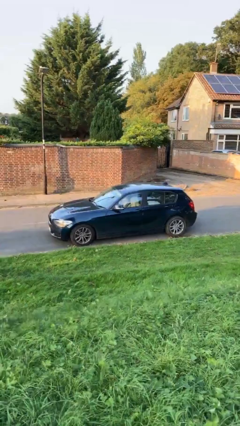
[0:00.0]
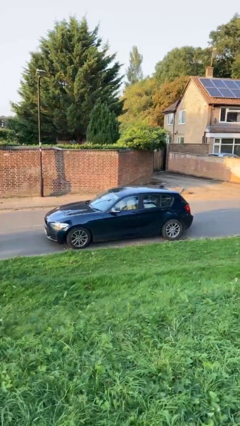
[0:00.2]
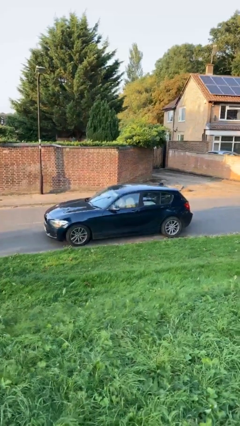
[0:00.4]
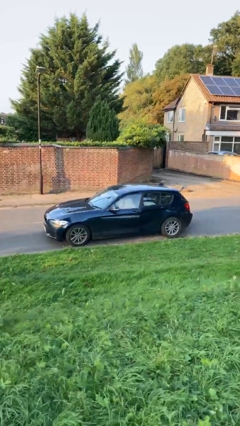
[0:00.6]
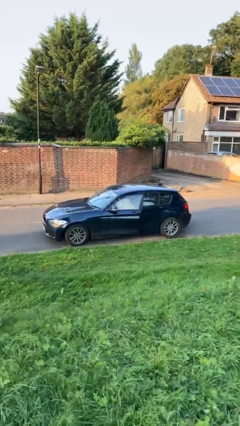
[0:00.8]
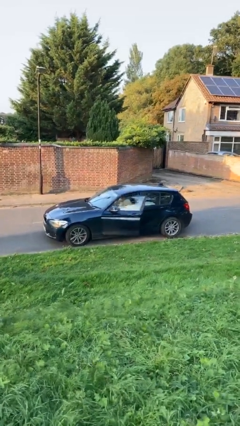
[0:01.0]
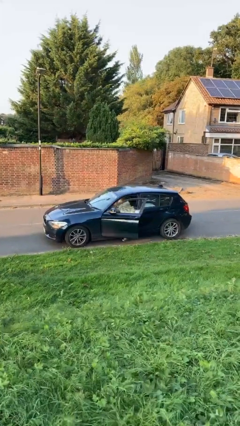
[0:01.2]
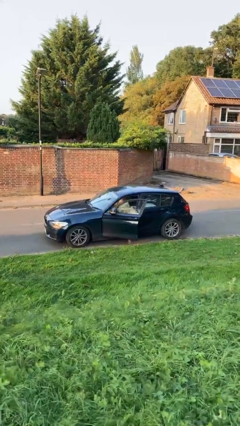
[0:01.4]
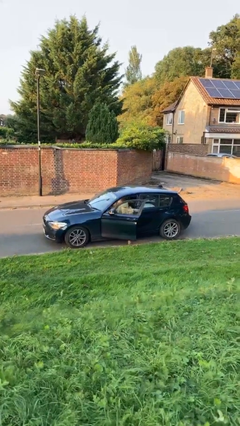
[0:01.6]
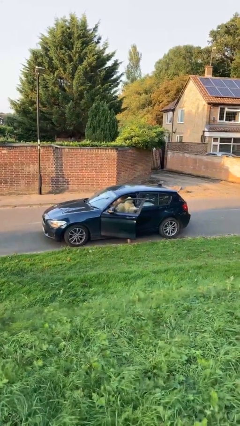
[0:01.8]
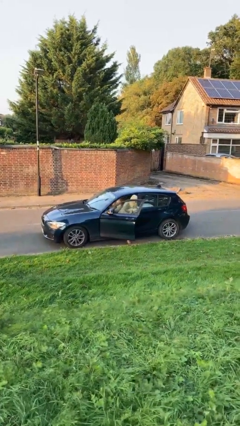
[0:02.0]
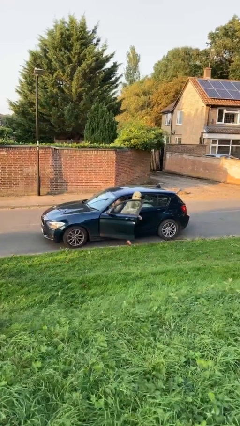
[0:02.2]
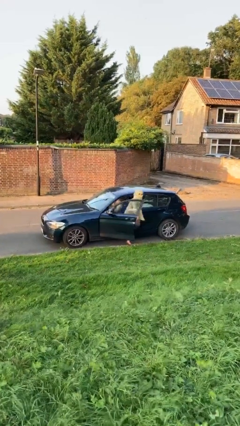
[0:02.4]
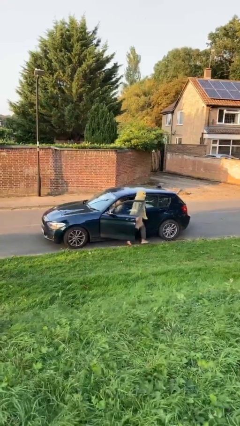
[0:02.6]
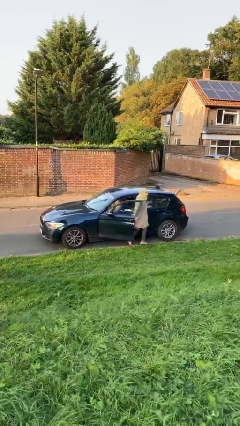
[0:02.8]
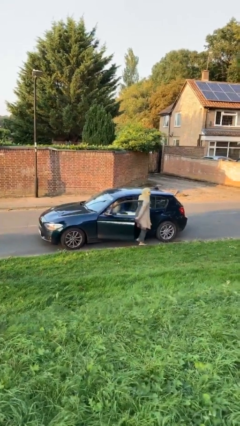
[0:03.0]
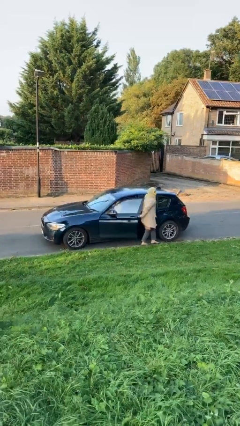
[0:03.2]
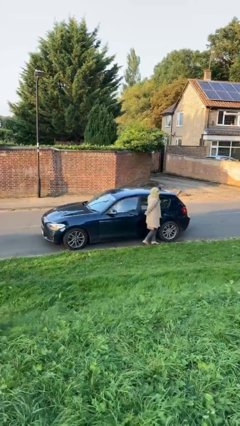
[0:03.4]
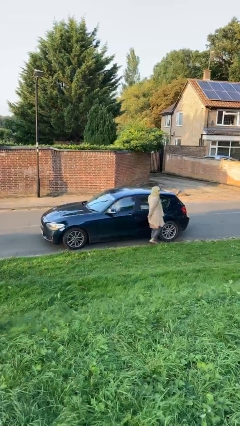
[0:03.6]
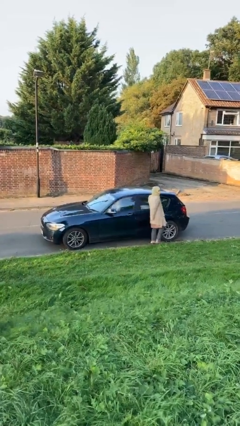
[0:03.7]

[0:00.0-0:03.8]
car drops off person

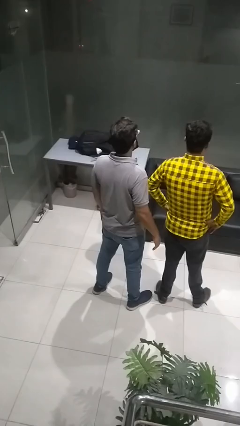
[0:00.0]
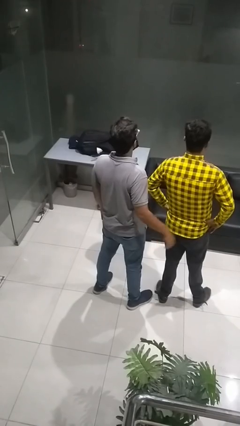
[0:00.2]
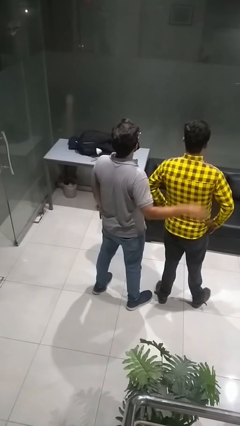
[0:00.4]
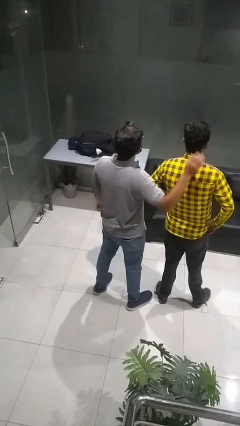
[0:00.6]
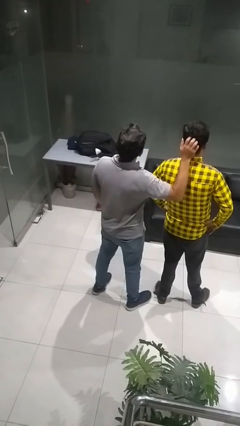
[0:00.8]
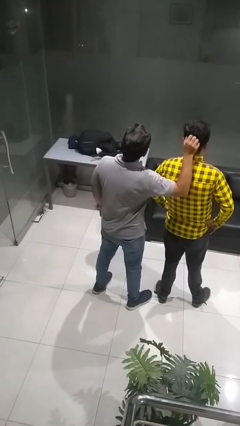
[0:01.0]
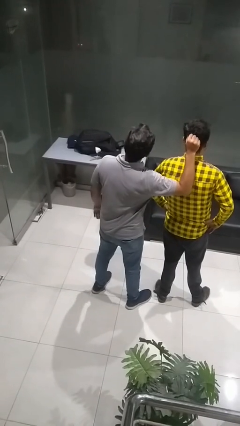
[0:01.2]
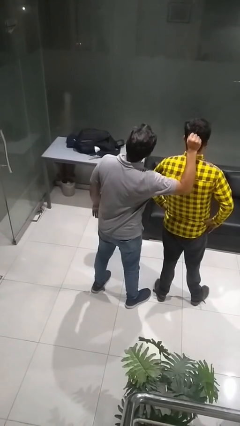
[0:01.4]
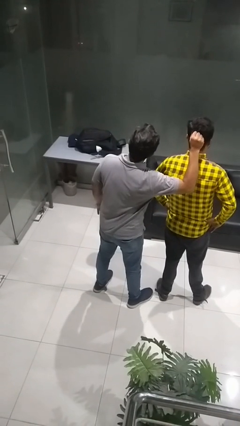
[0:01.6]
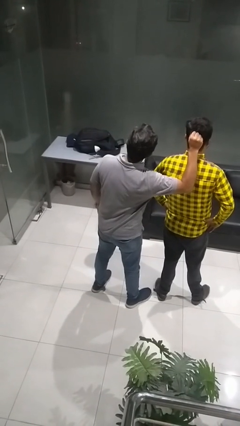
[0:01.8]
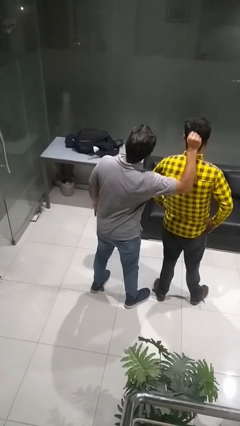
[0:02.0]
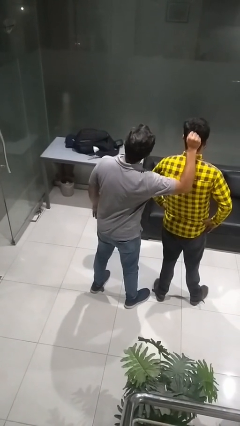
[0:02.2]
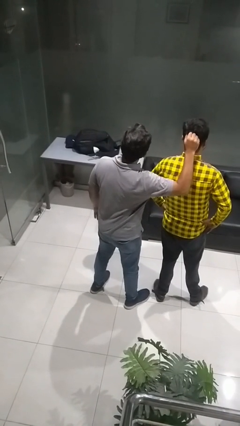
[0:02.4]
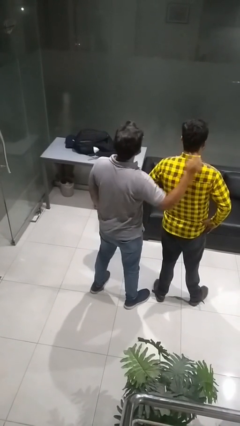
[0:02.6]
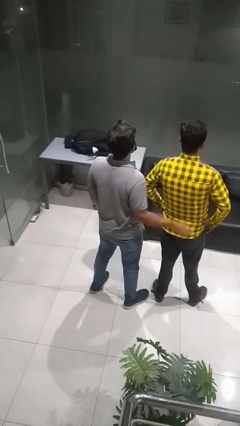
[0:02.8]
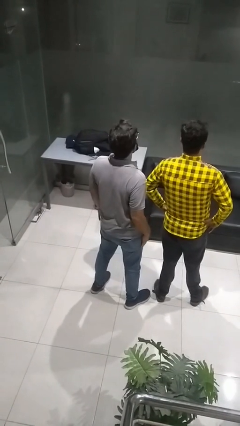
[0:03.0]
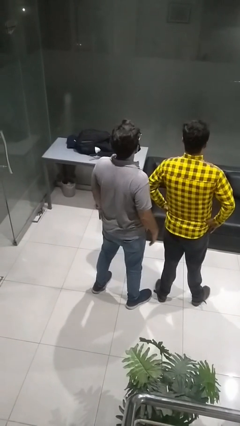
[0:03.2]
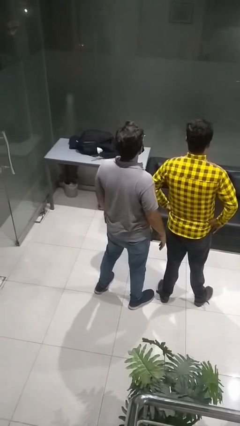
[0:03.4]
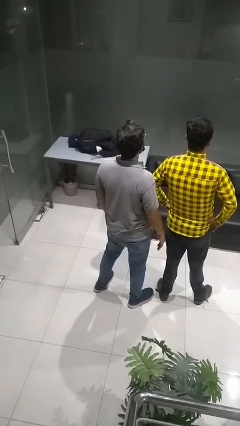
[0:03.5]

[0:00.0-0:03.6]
person grabs person by hair

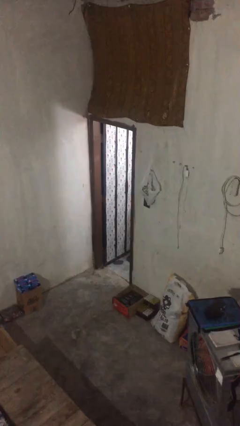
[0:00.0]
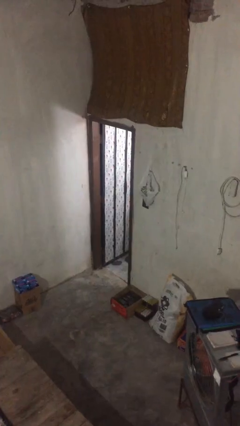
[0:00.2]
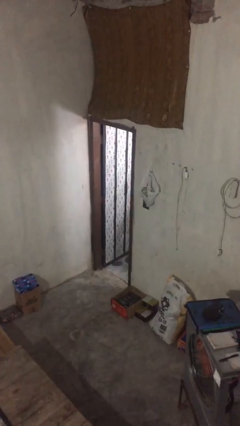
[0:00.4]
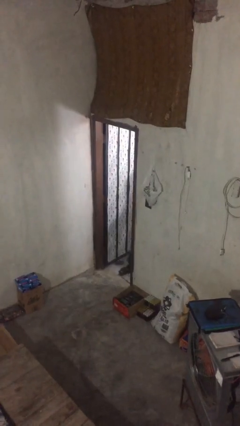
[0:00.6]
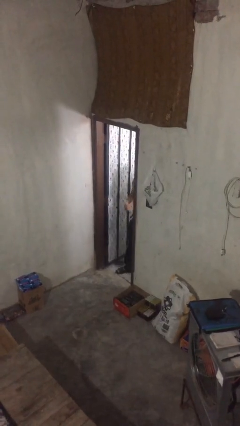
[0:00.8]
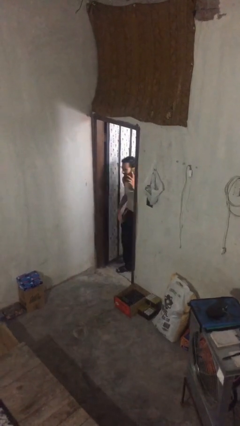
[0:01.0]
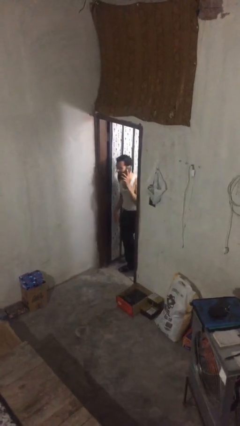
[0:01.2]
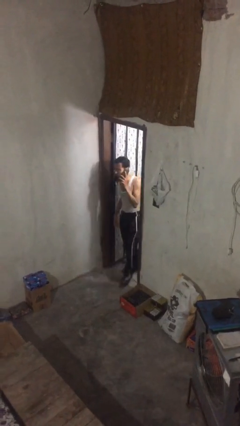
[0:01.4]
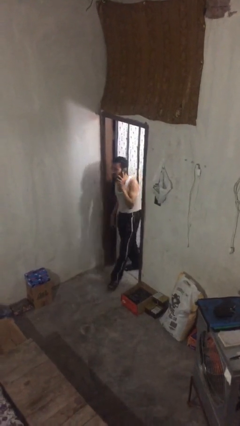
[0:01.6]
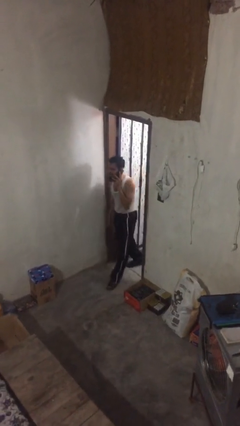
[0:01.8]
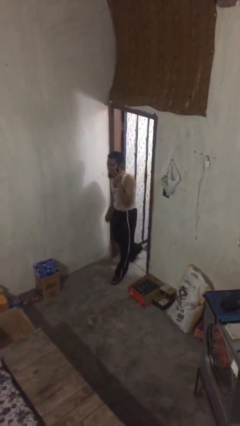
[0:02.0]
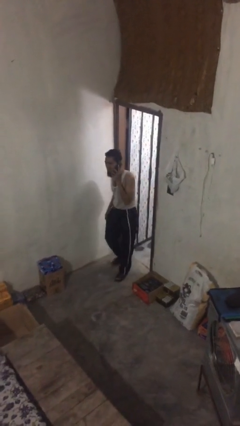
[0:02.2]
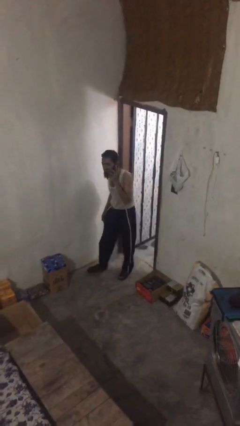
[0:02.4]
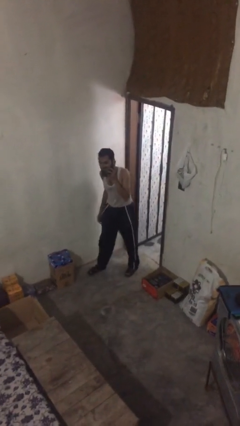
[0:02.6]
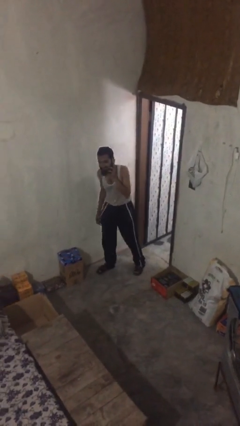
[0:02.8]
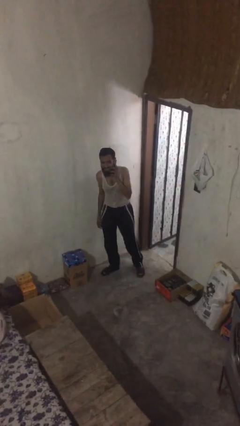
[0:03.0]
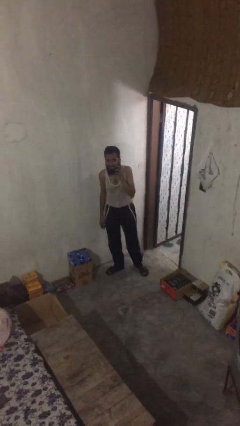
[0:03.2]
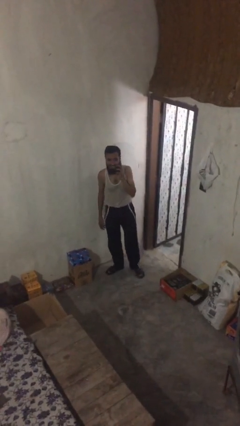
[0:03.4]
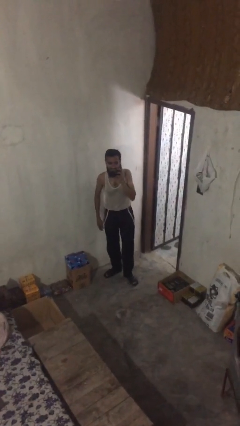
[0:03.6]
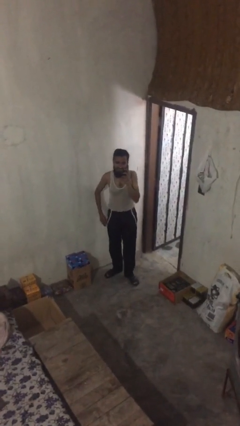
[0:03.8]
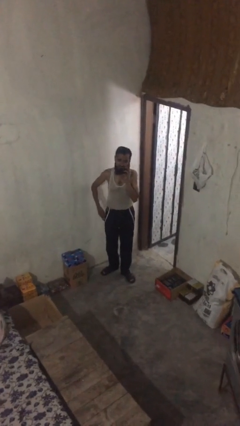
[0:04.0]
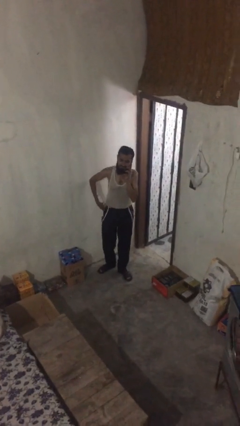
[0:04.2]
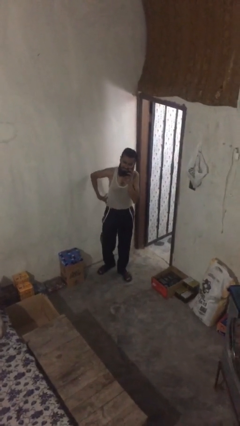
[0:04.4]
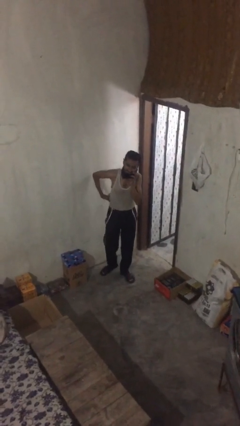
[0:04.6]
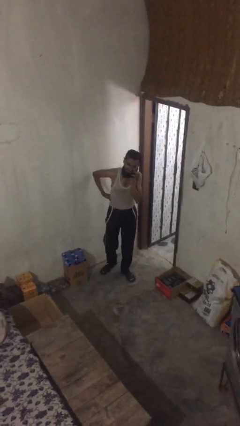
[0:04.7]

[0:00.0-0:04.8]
person enters scene through structure

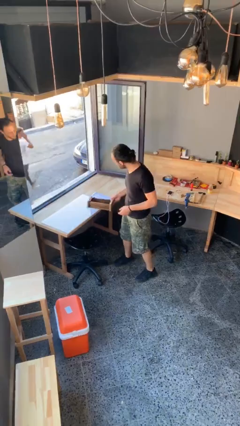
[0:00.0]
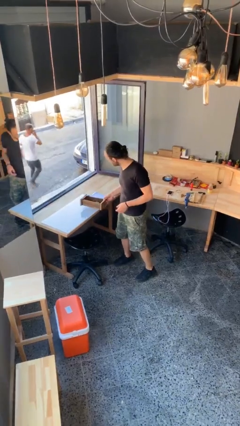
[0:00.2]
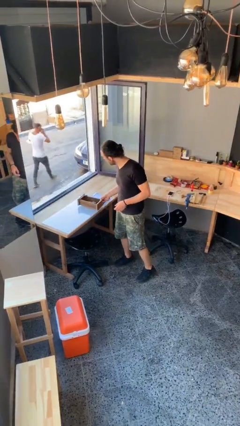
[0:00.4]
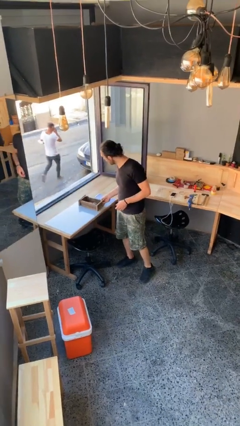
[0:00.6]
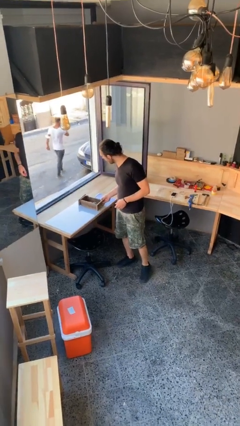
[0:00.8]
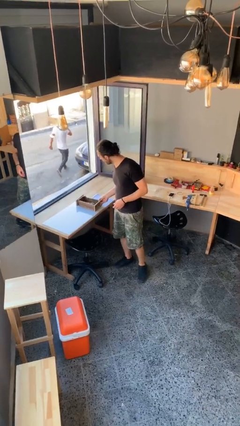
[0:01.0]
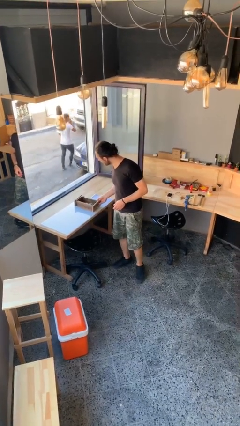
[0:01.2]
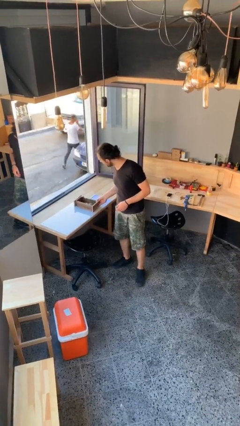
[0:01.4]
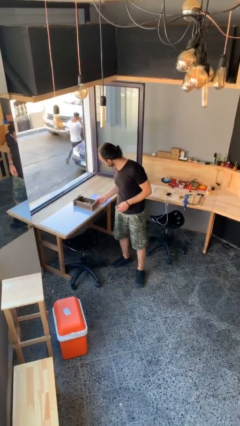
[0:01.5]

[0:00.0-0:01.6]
person puts down object on table

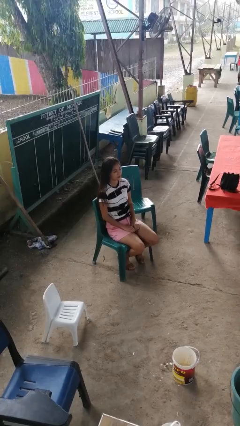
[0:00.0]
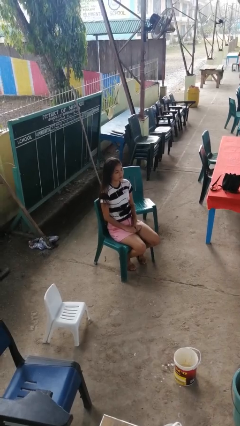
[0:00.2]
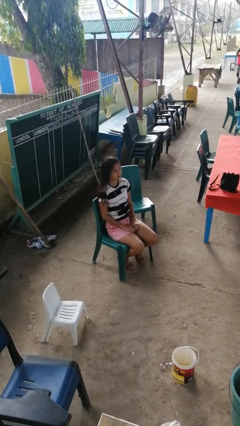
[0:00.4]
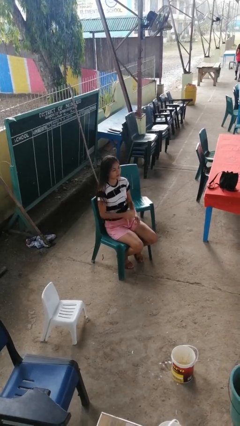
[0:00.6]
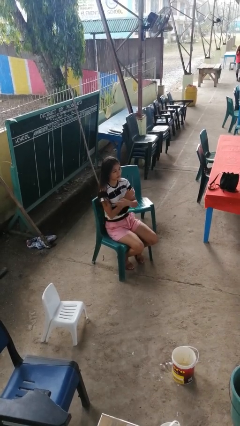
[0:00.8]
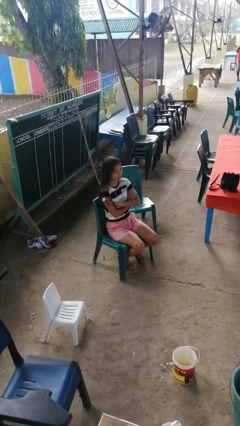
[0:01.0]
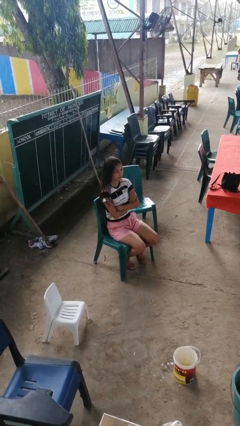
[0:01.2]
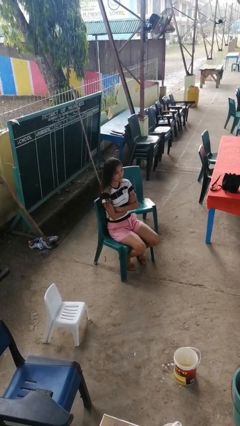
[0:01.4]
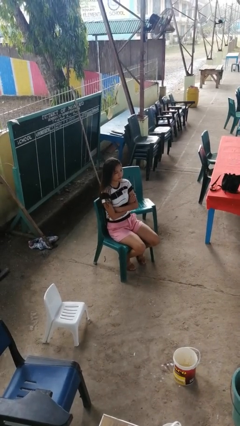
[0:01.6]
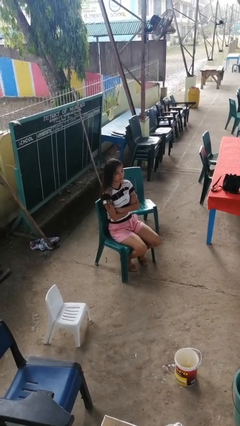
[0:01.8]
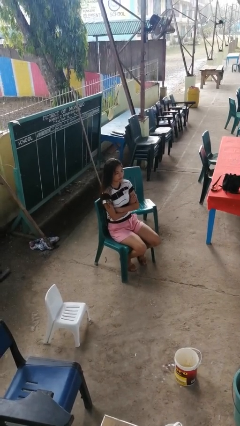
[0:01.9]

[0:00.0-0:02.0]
person gestures arms x

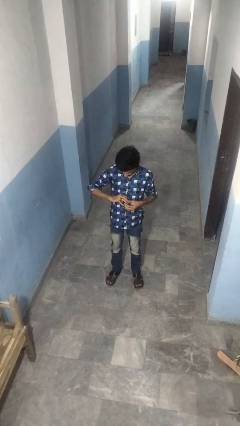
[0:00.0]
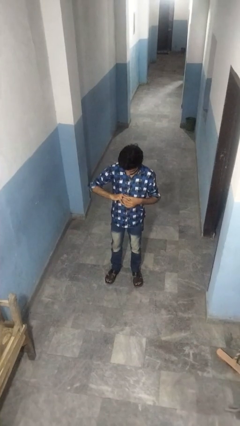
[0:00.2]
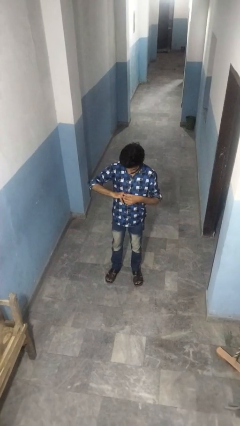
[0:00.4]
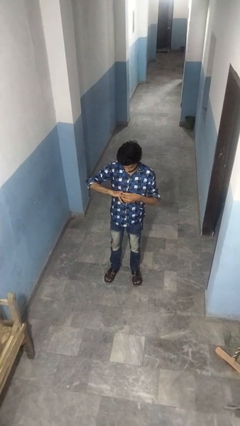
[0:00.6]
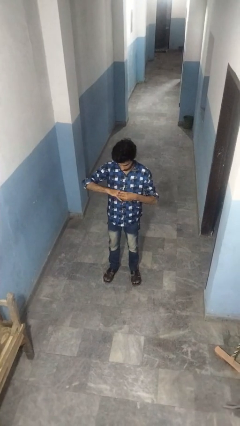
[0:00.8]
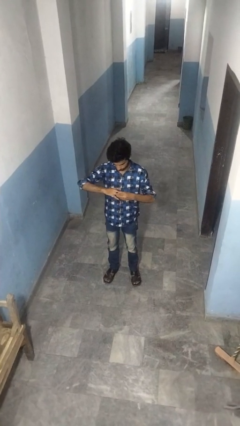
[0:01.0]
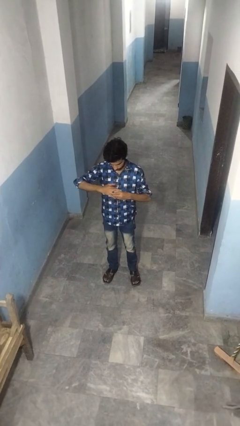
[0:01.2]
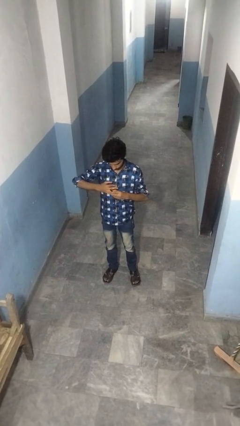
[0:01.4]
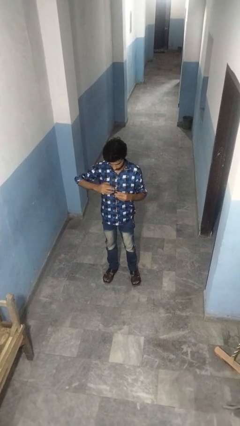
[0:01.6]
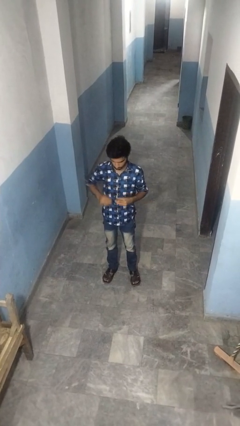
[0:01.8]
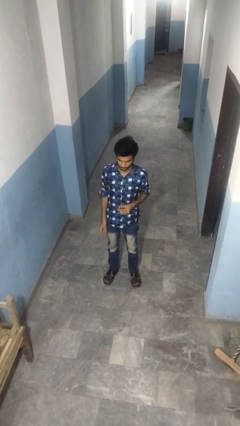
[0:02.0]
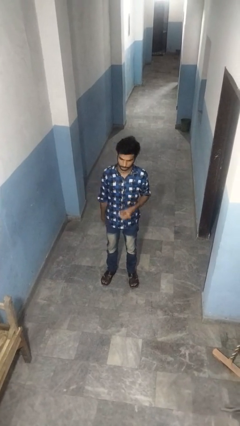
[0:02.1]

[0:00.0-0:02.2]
person takes off ring
